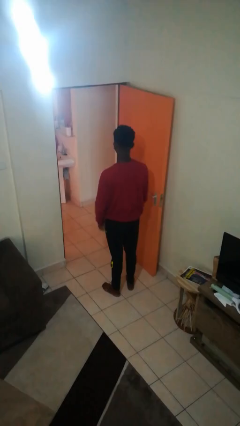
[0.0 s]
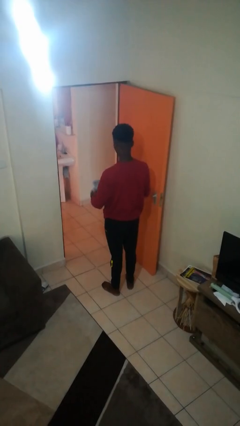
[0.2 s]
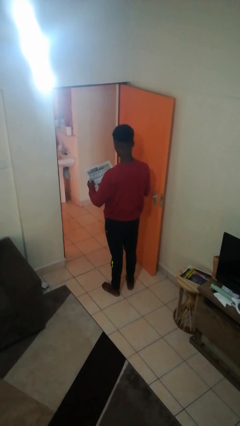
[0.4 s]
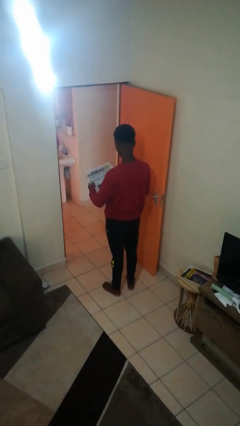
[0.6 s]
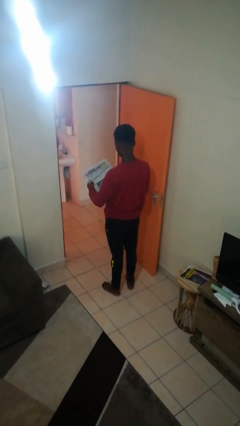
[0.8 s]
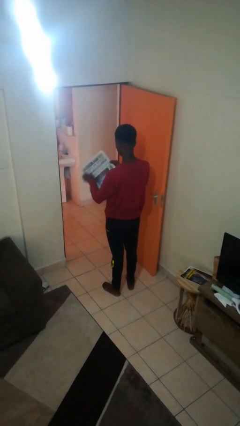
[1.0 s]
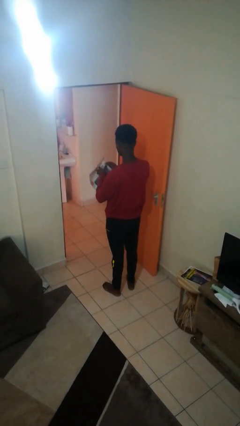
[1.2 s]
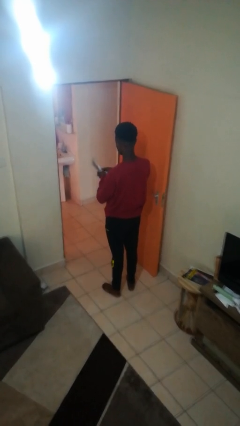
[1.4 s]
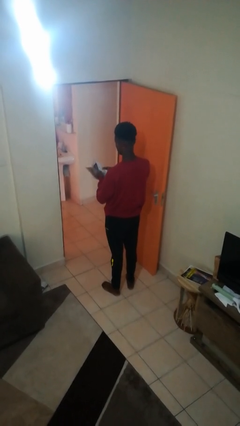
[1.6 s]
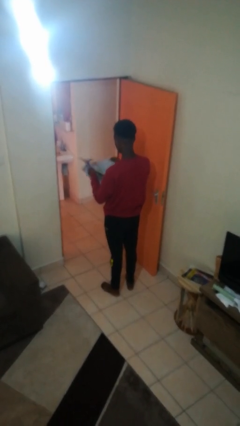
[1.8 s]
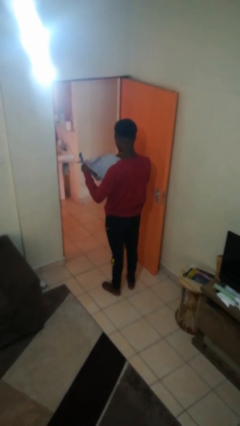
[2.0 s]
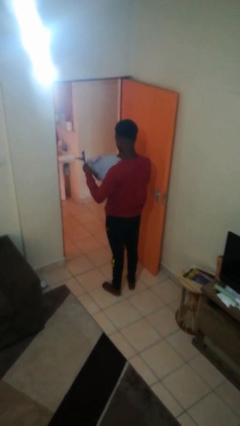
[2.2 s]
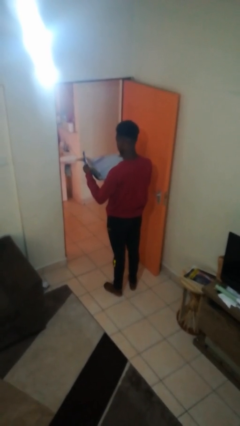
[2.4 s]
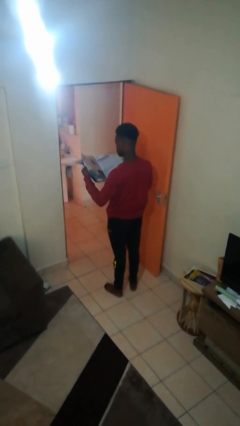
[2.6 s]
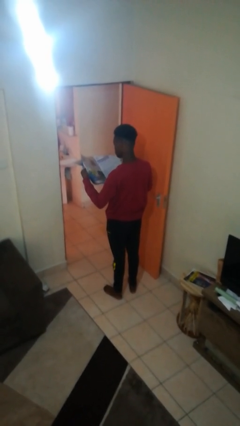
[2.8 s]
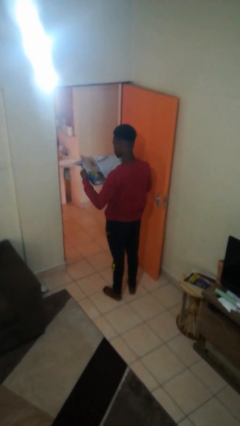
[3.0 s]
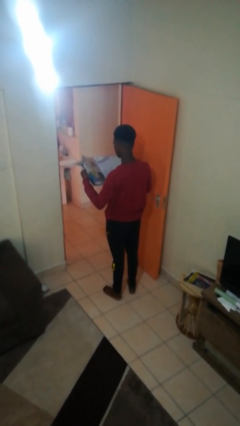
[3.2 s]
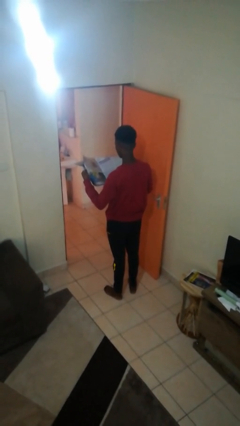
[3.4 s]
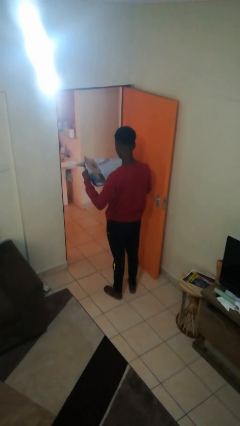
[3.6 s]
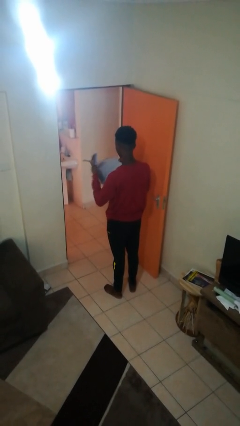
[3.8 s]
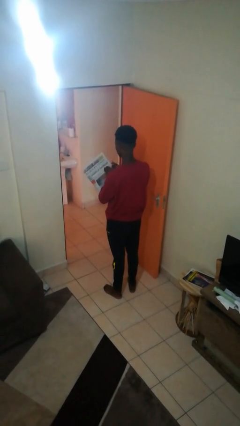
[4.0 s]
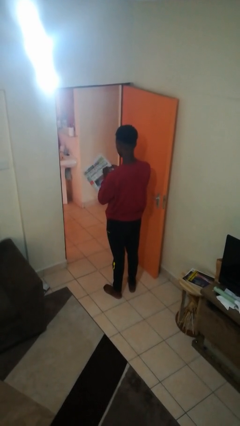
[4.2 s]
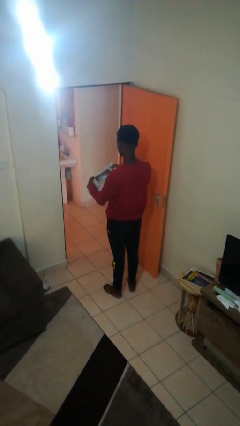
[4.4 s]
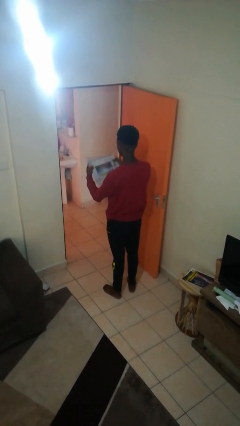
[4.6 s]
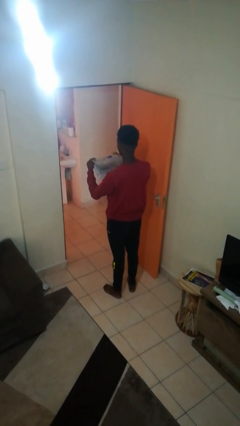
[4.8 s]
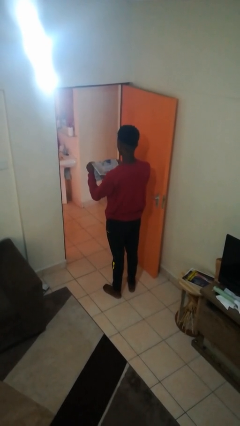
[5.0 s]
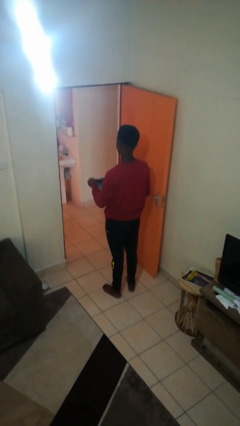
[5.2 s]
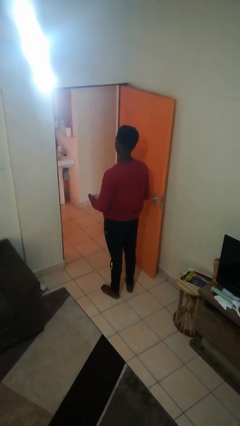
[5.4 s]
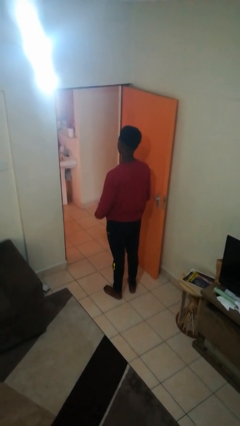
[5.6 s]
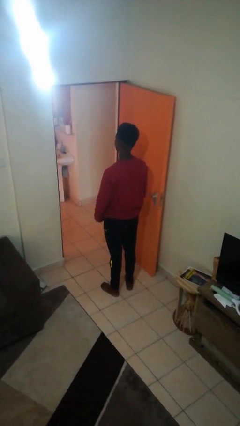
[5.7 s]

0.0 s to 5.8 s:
person reads newspaper

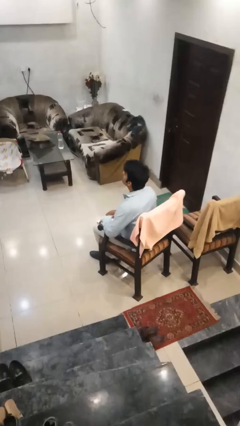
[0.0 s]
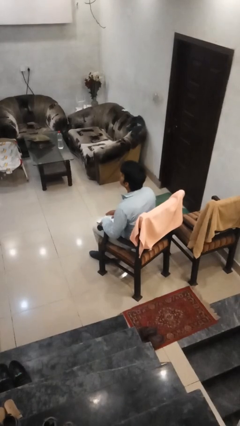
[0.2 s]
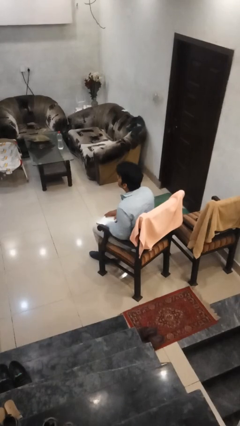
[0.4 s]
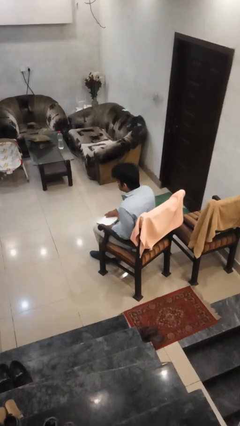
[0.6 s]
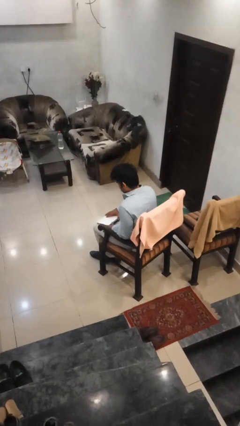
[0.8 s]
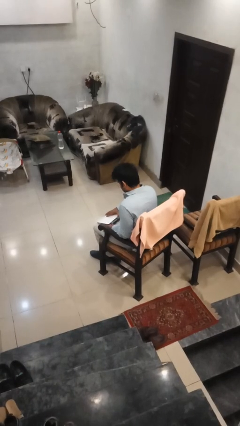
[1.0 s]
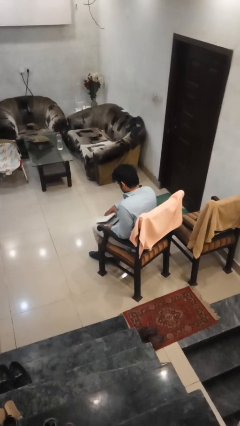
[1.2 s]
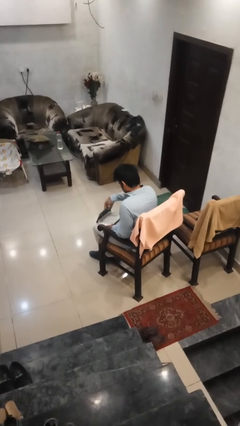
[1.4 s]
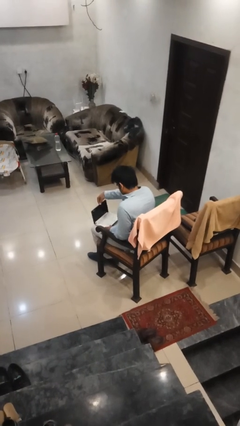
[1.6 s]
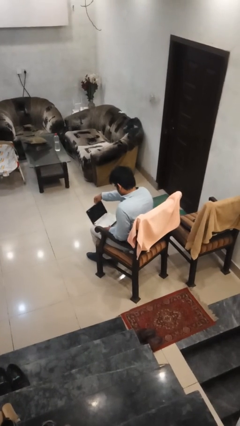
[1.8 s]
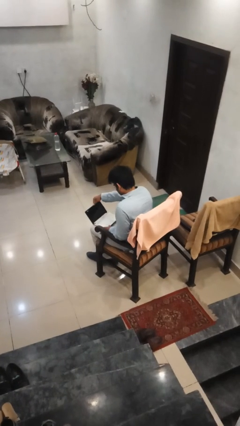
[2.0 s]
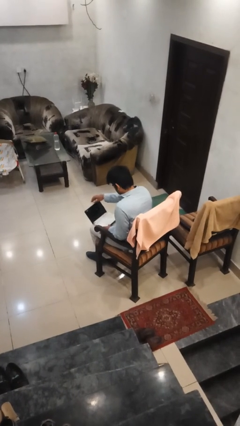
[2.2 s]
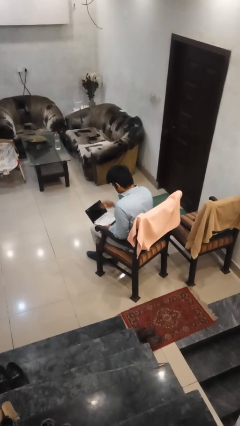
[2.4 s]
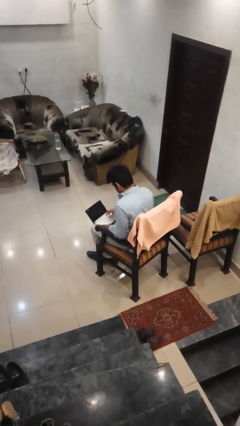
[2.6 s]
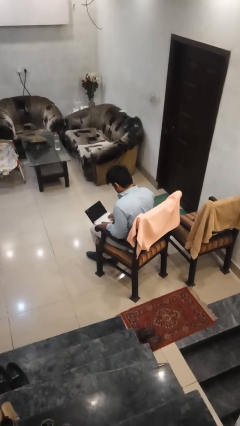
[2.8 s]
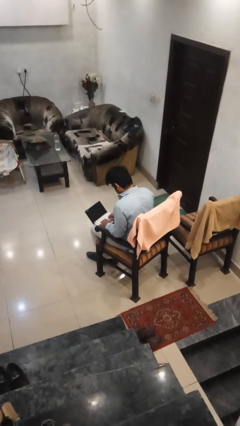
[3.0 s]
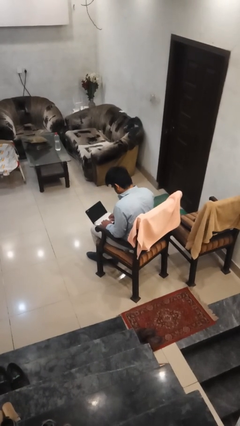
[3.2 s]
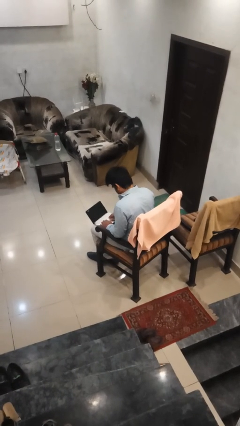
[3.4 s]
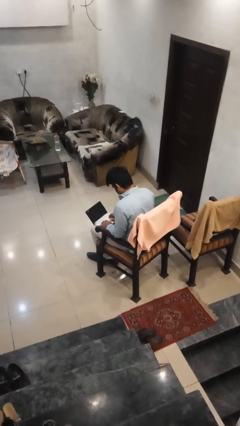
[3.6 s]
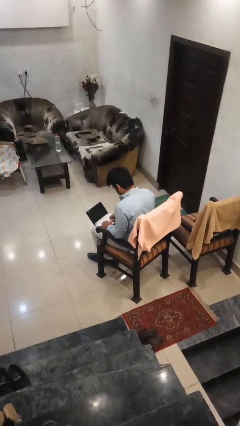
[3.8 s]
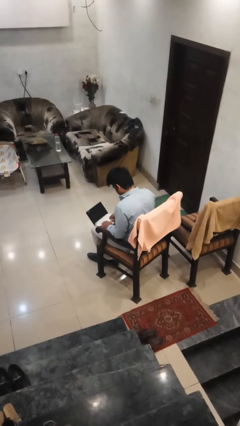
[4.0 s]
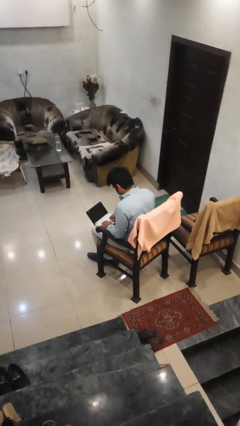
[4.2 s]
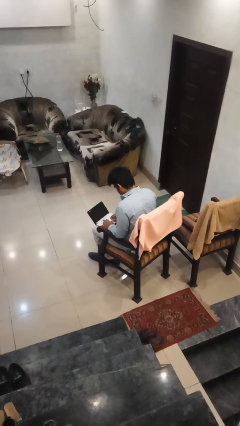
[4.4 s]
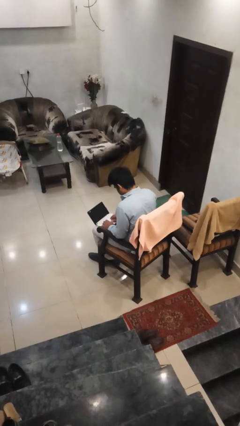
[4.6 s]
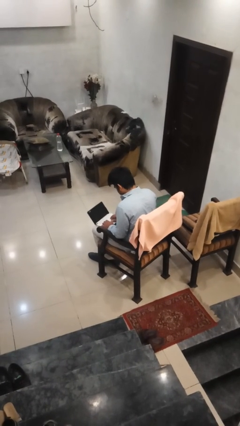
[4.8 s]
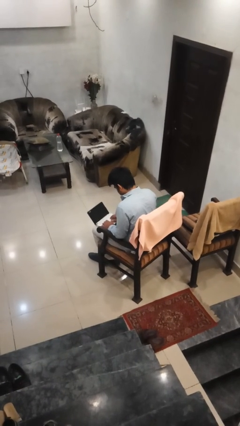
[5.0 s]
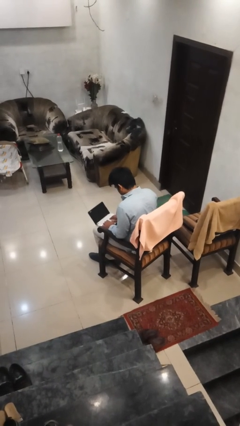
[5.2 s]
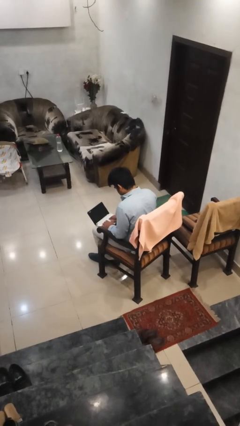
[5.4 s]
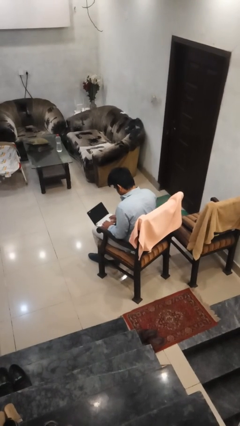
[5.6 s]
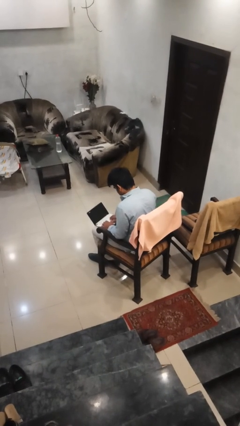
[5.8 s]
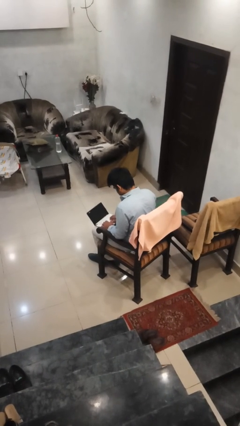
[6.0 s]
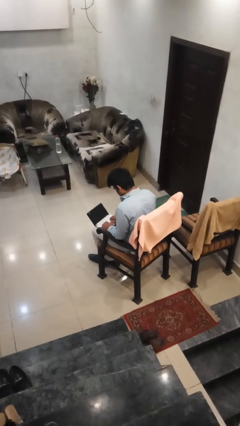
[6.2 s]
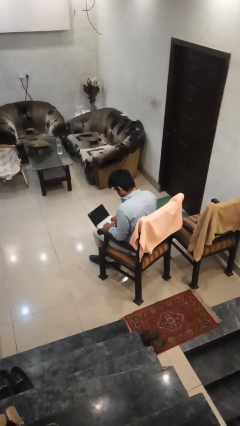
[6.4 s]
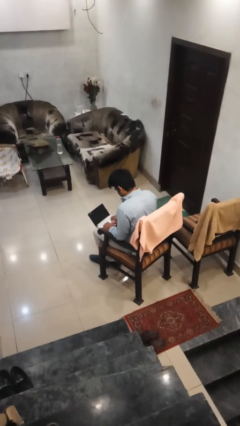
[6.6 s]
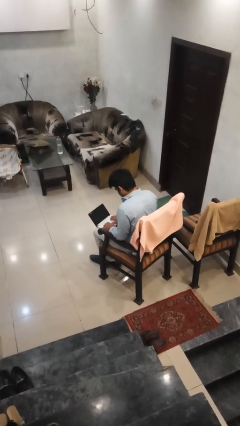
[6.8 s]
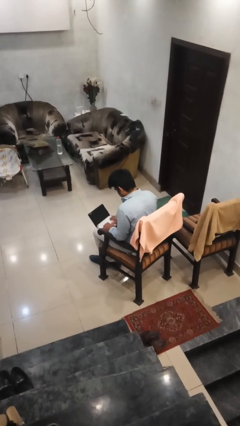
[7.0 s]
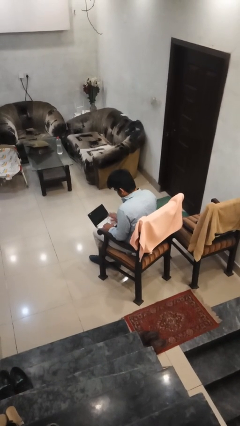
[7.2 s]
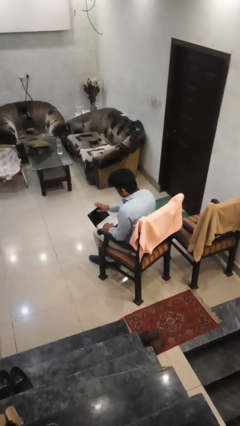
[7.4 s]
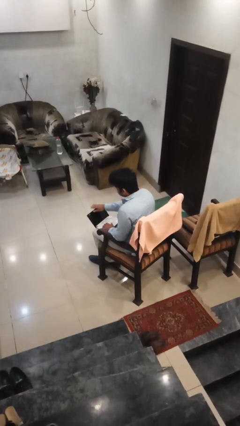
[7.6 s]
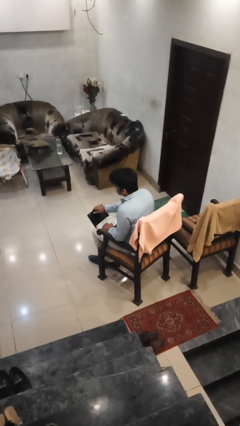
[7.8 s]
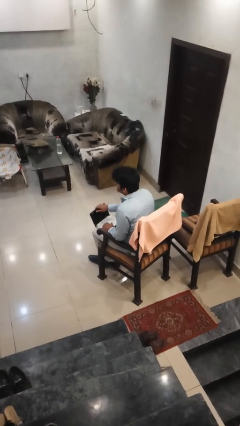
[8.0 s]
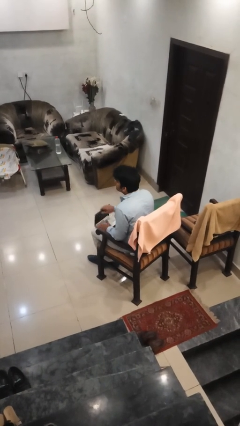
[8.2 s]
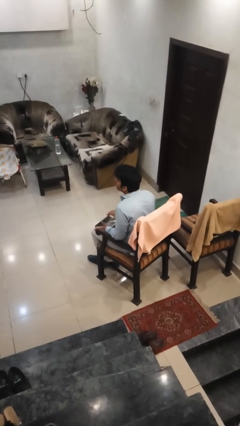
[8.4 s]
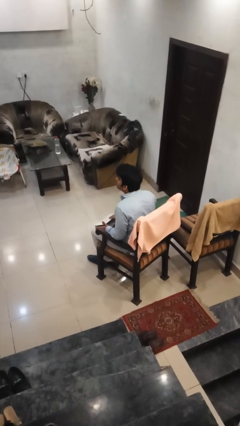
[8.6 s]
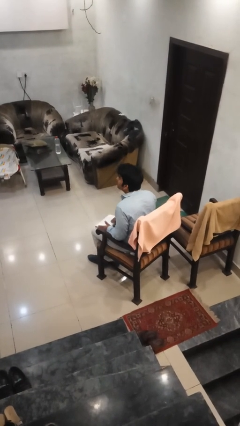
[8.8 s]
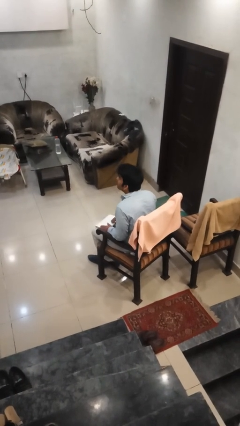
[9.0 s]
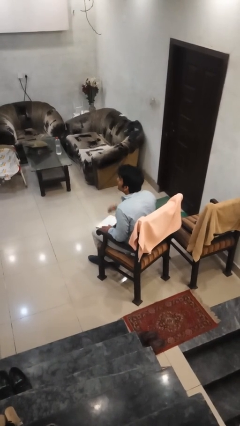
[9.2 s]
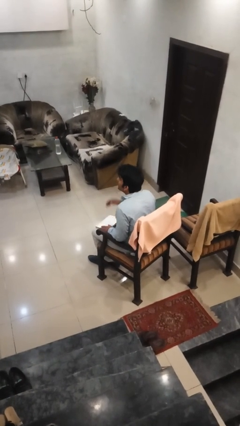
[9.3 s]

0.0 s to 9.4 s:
person interacts with laptop

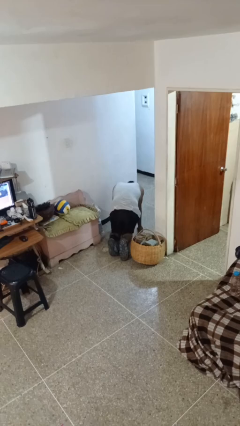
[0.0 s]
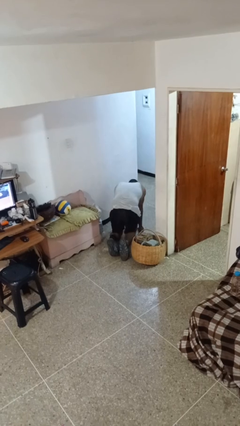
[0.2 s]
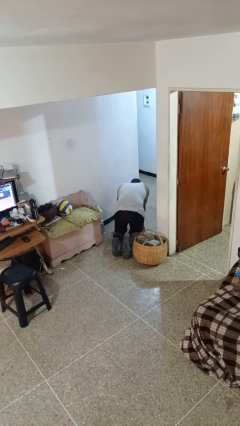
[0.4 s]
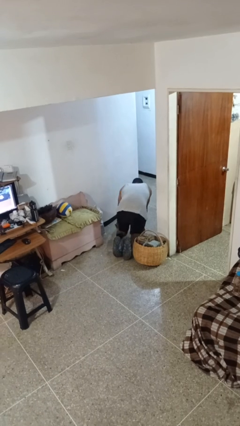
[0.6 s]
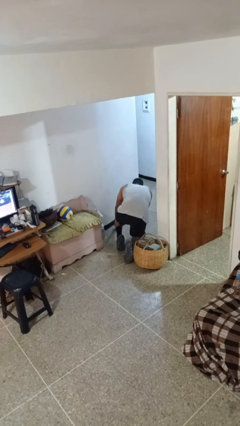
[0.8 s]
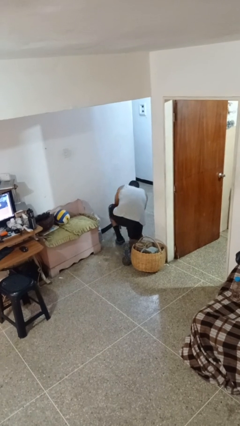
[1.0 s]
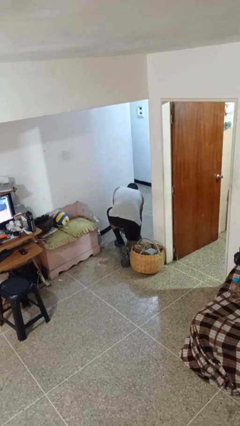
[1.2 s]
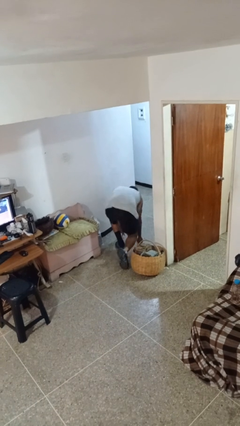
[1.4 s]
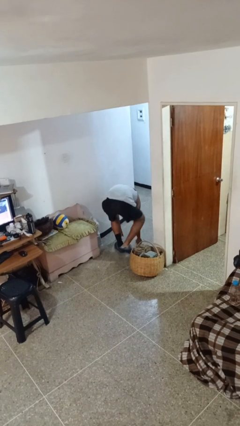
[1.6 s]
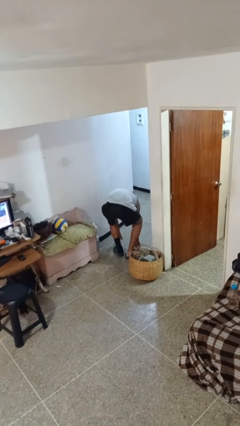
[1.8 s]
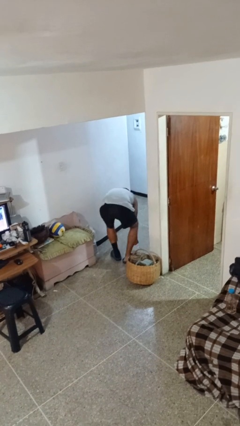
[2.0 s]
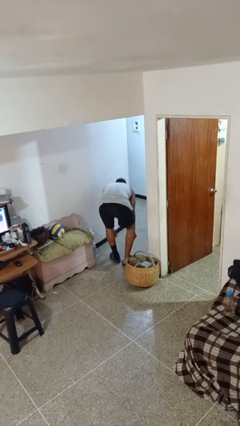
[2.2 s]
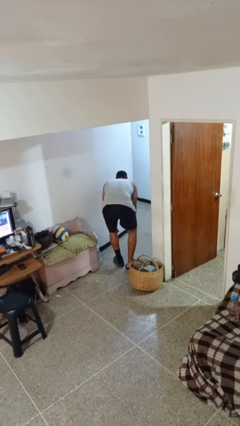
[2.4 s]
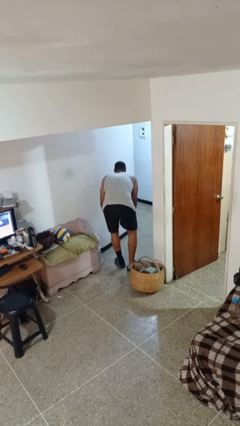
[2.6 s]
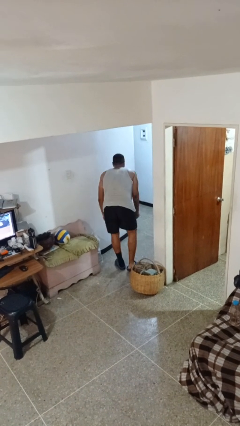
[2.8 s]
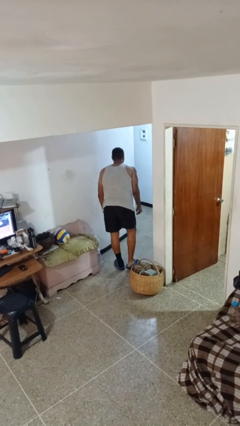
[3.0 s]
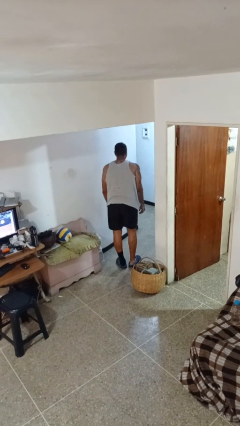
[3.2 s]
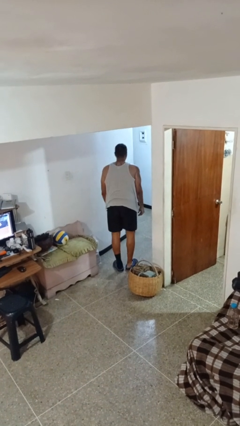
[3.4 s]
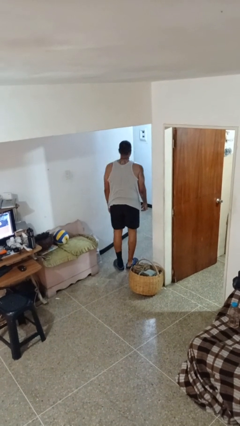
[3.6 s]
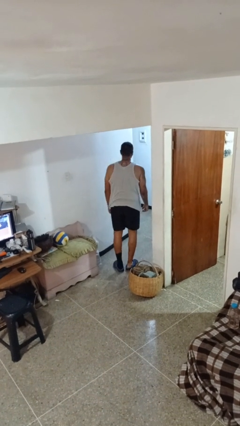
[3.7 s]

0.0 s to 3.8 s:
person stands up from floor
